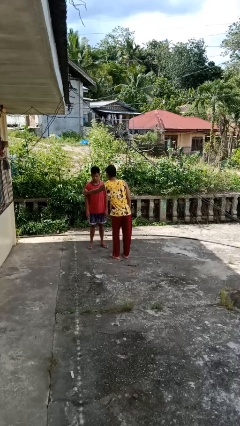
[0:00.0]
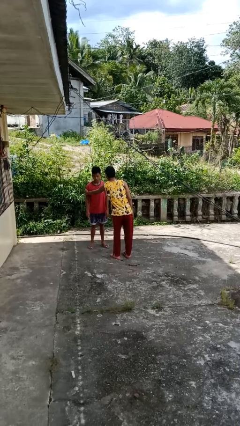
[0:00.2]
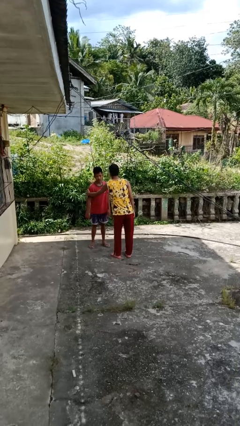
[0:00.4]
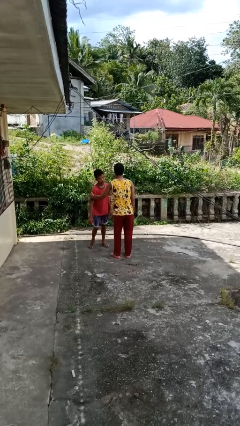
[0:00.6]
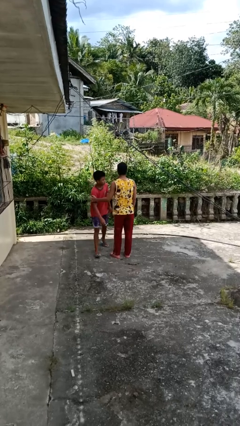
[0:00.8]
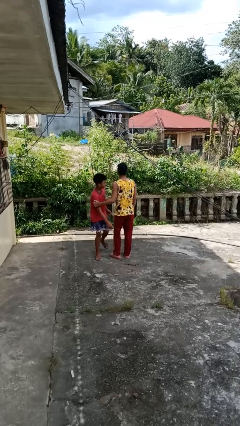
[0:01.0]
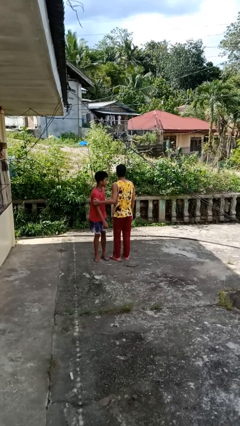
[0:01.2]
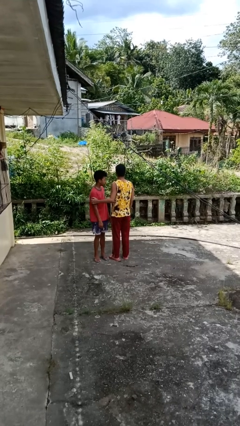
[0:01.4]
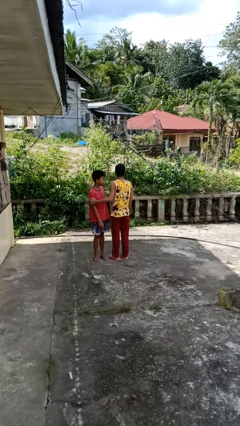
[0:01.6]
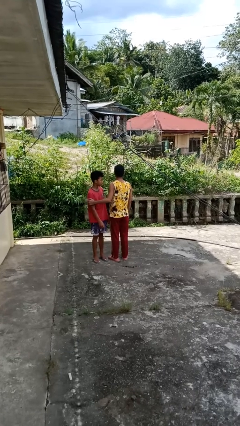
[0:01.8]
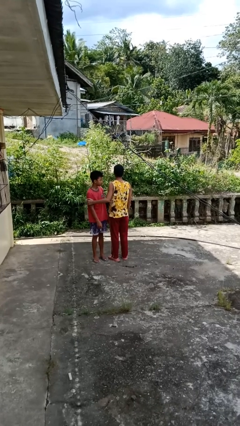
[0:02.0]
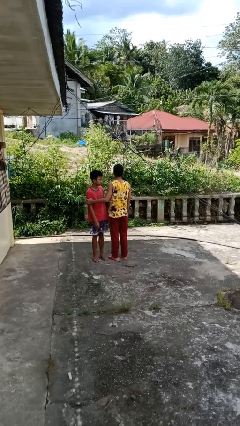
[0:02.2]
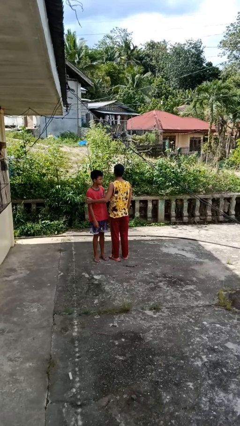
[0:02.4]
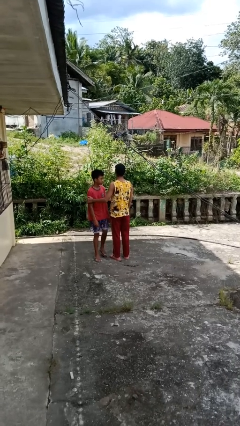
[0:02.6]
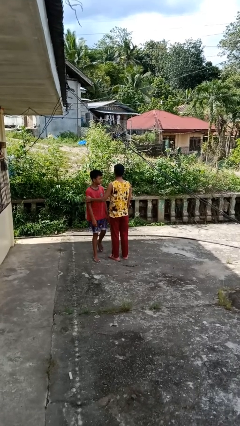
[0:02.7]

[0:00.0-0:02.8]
person grabs person by bicep

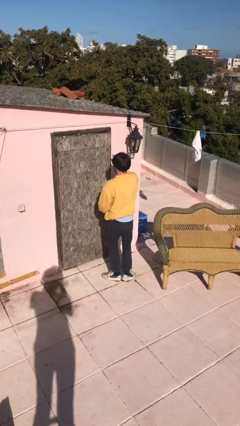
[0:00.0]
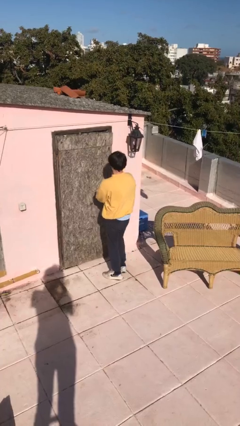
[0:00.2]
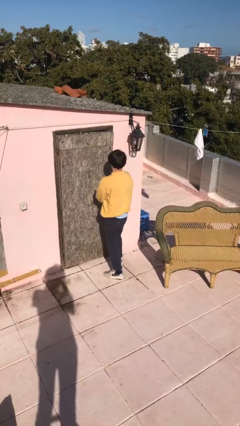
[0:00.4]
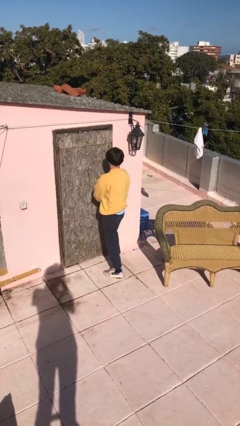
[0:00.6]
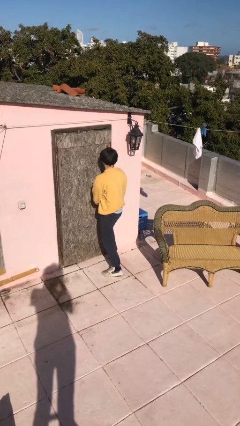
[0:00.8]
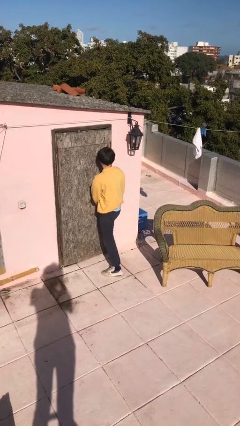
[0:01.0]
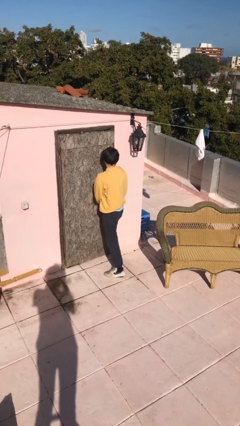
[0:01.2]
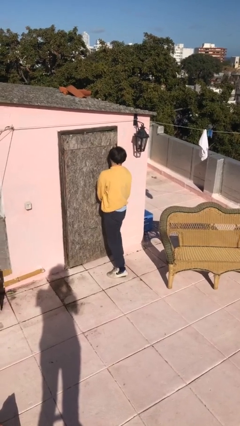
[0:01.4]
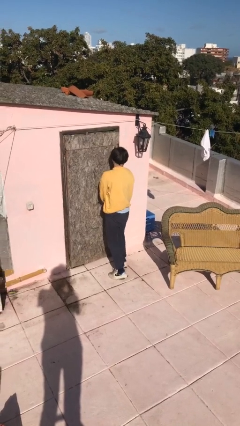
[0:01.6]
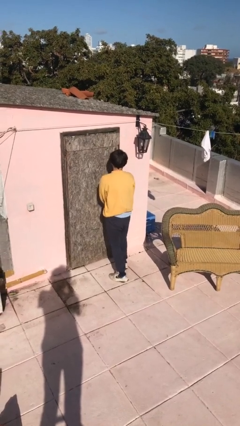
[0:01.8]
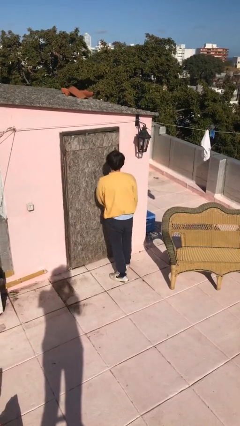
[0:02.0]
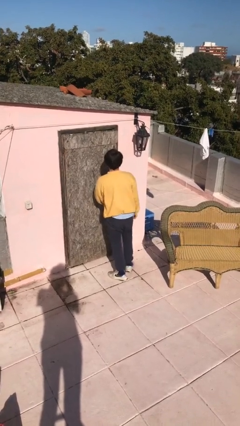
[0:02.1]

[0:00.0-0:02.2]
person locks door with keys

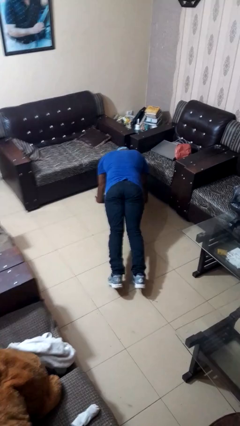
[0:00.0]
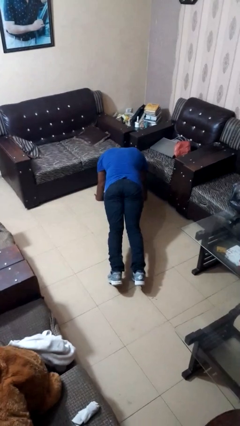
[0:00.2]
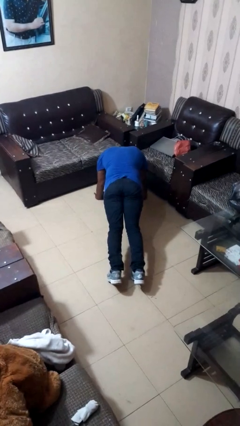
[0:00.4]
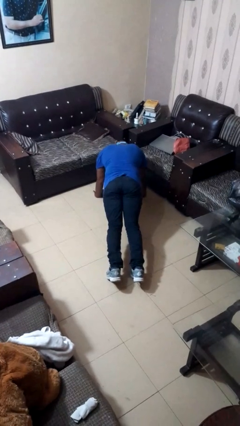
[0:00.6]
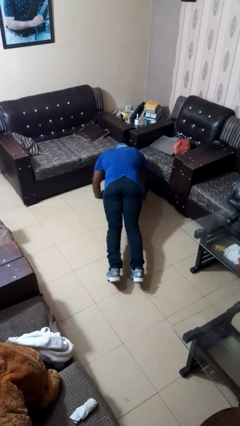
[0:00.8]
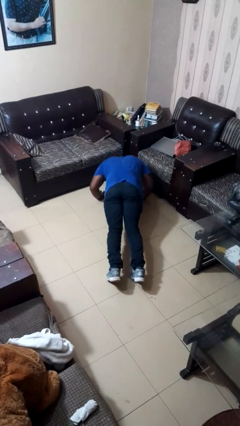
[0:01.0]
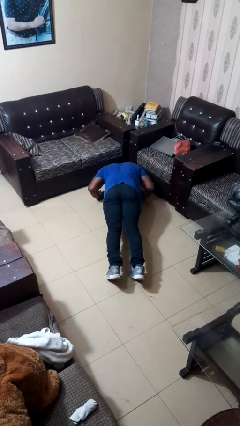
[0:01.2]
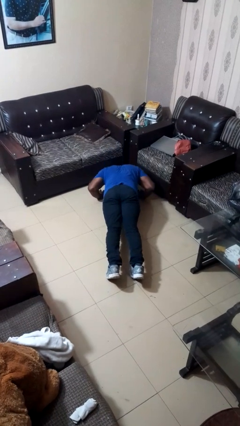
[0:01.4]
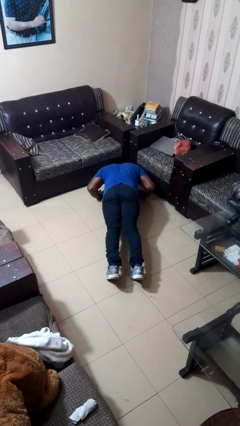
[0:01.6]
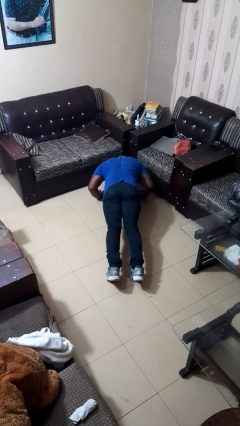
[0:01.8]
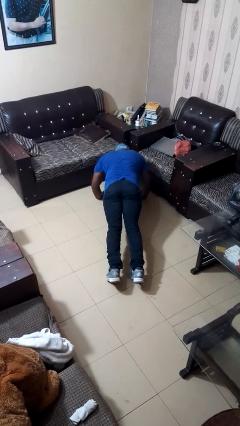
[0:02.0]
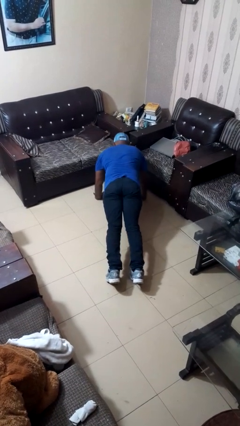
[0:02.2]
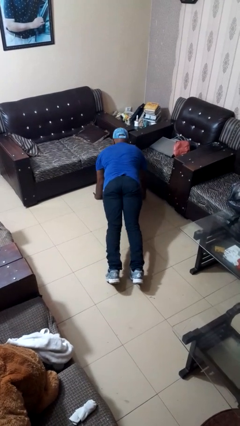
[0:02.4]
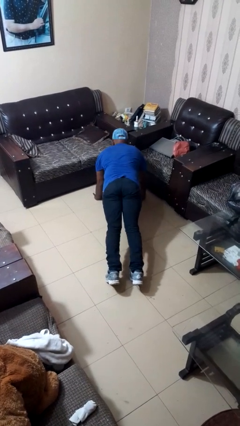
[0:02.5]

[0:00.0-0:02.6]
person exercises with pushup

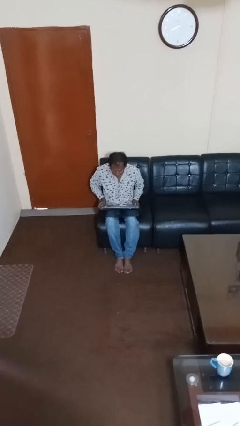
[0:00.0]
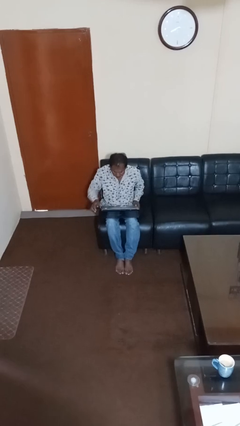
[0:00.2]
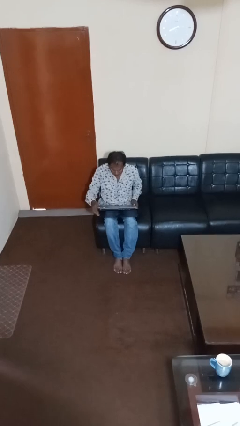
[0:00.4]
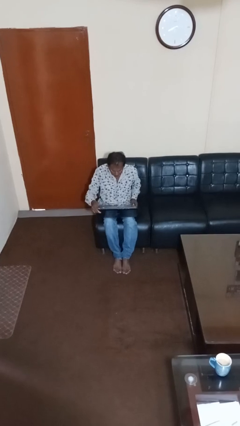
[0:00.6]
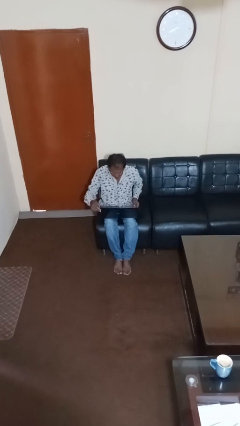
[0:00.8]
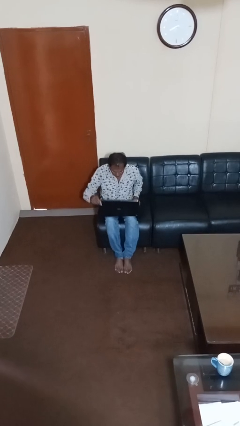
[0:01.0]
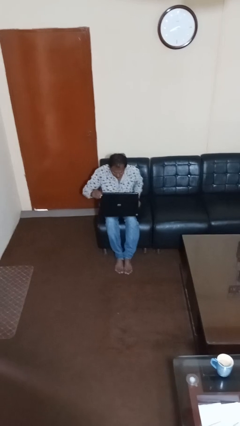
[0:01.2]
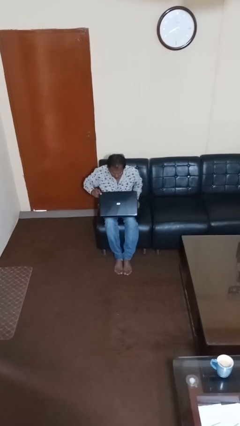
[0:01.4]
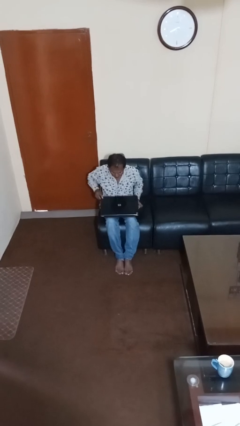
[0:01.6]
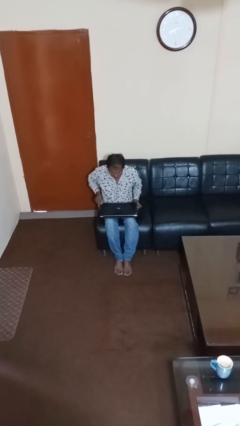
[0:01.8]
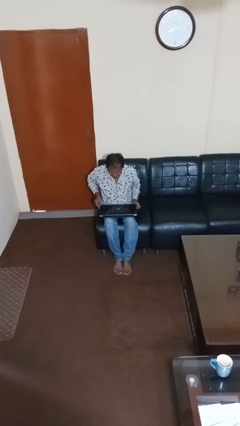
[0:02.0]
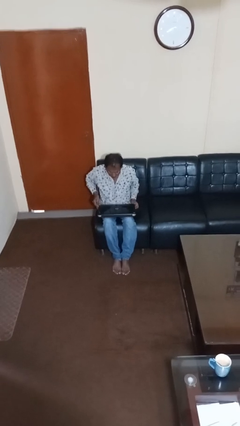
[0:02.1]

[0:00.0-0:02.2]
person closes laptop

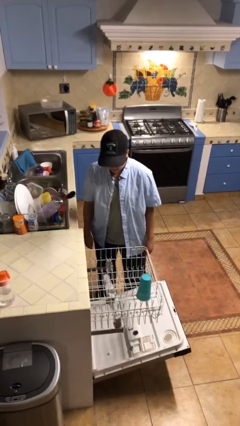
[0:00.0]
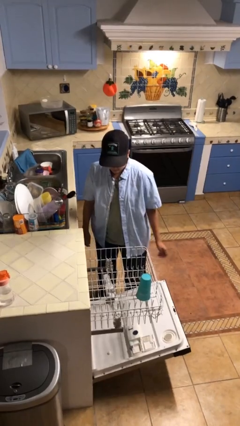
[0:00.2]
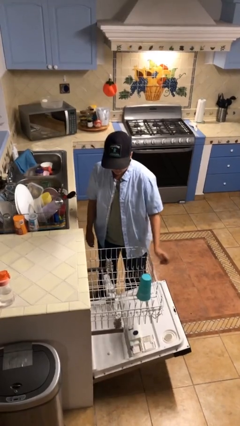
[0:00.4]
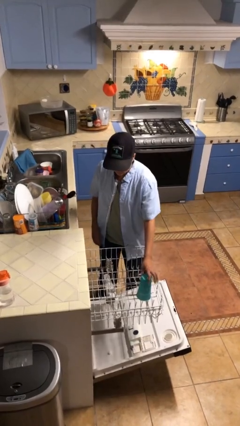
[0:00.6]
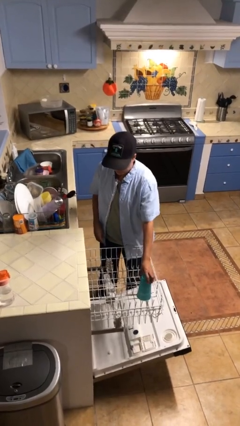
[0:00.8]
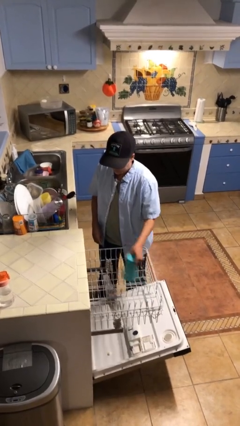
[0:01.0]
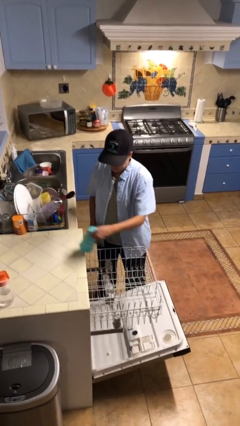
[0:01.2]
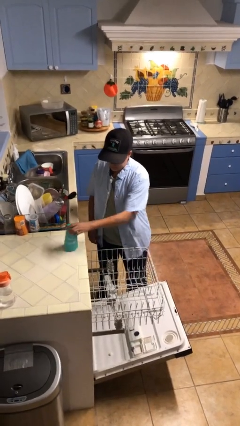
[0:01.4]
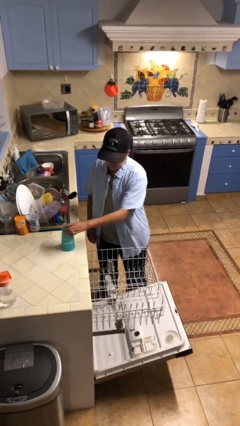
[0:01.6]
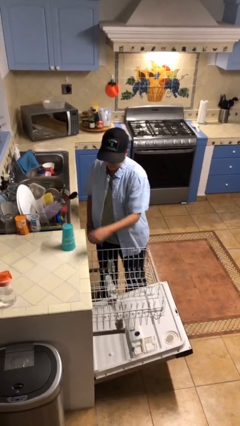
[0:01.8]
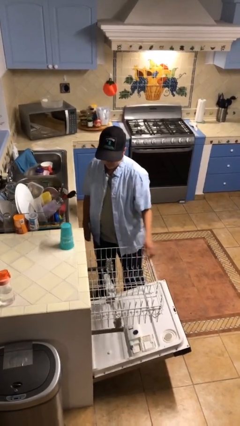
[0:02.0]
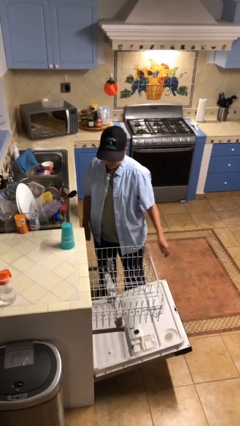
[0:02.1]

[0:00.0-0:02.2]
person unloads dishwasher

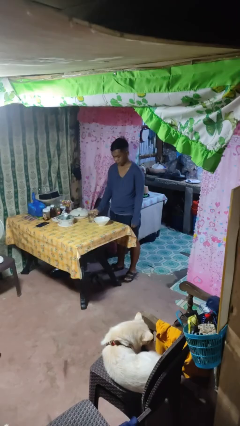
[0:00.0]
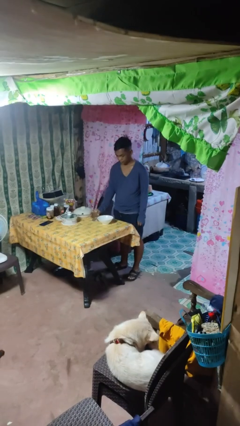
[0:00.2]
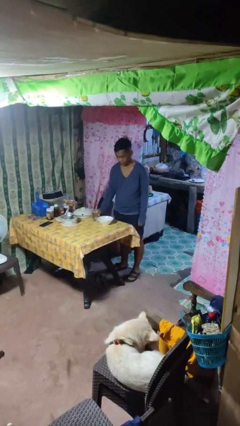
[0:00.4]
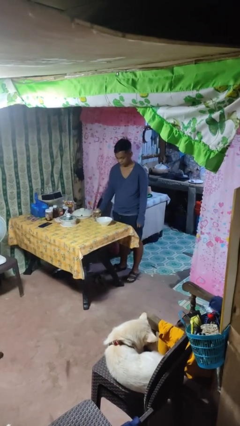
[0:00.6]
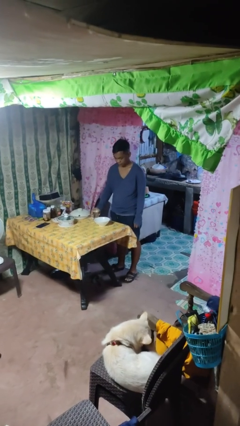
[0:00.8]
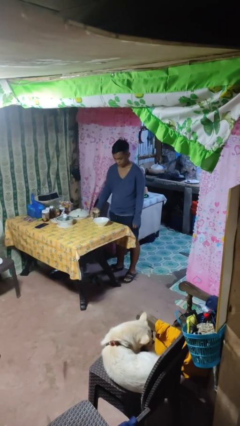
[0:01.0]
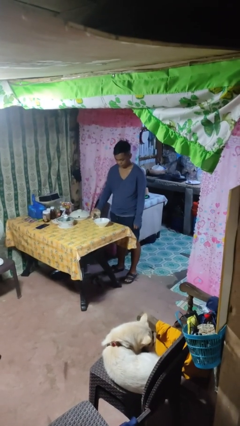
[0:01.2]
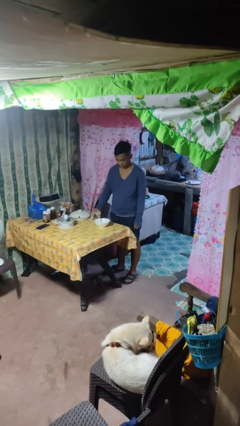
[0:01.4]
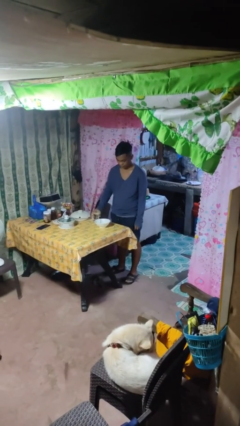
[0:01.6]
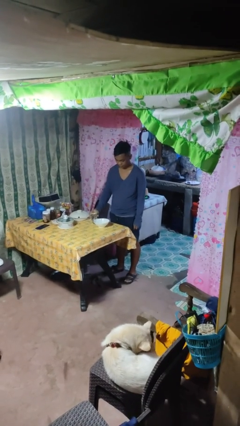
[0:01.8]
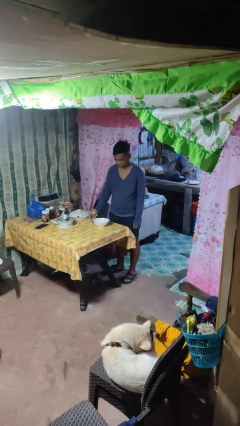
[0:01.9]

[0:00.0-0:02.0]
person pours into bowl

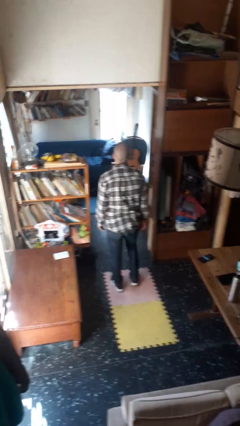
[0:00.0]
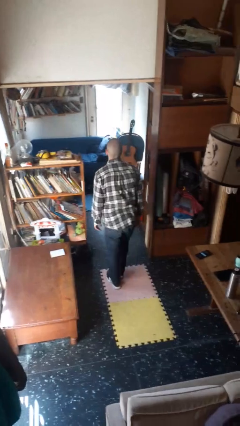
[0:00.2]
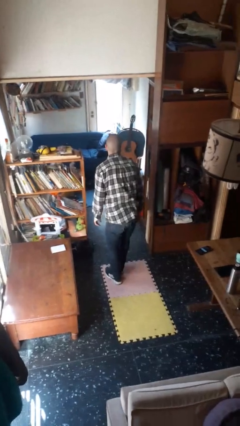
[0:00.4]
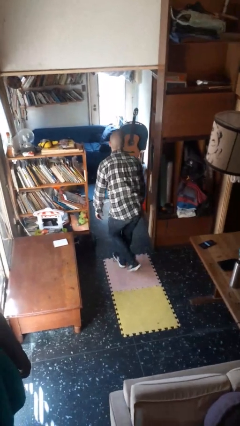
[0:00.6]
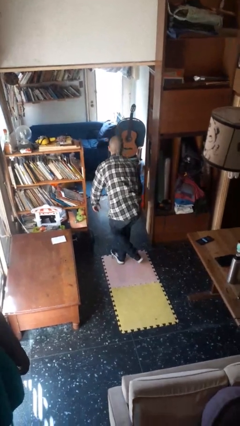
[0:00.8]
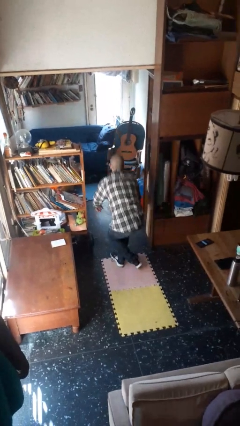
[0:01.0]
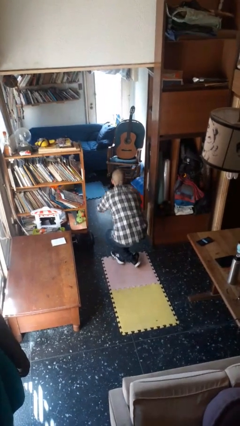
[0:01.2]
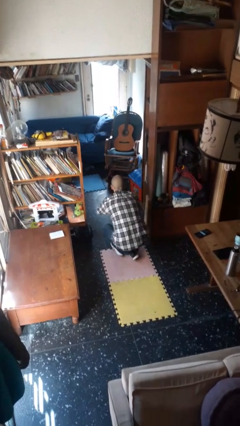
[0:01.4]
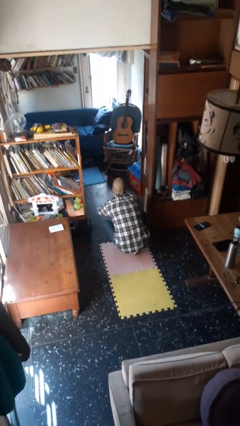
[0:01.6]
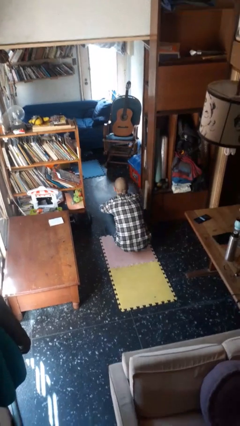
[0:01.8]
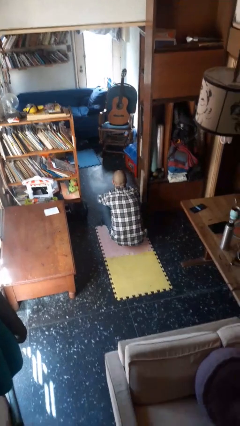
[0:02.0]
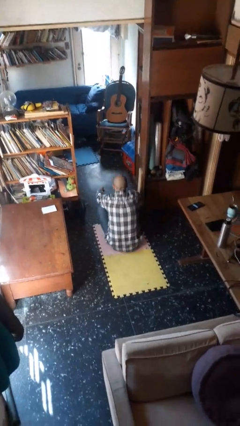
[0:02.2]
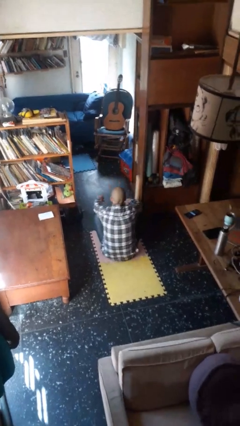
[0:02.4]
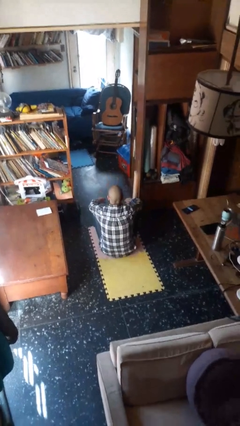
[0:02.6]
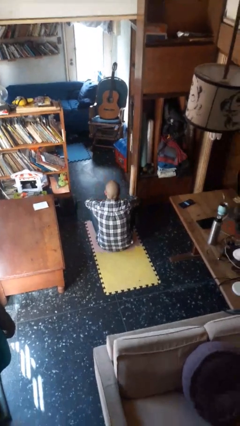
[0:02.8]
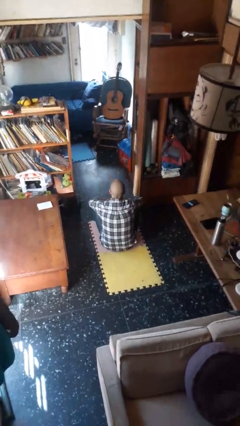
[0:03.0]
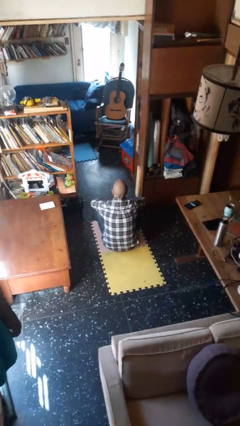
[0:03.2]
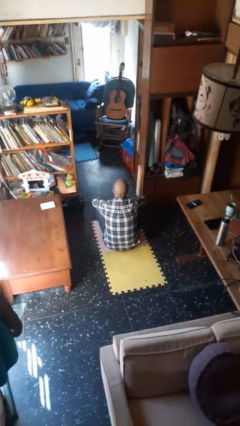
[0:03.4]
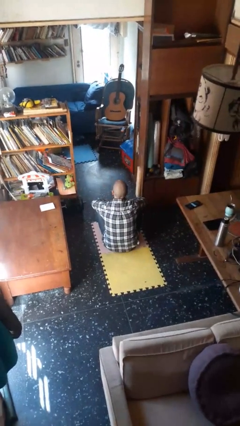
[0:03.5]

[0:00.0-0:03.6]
person sits crisscross
